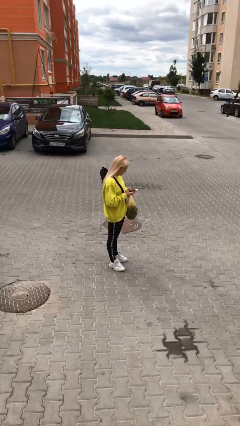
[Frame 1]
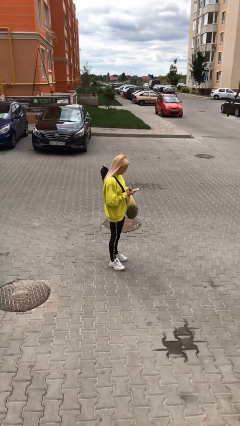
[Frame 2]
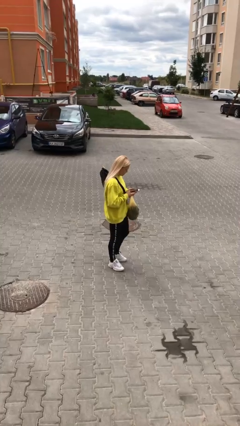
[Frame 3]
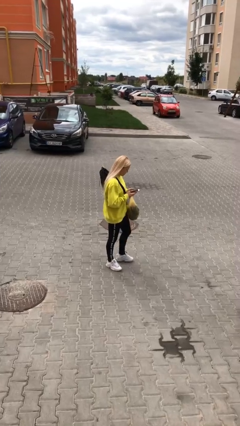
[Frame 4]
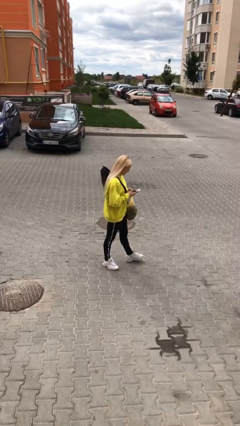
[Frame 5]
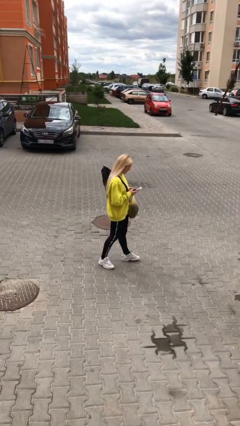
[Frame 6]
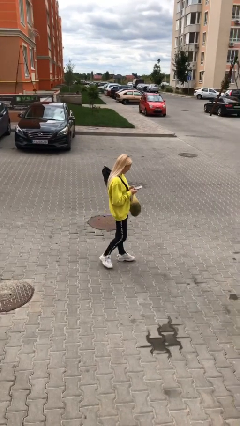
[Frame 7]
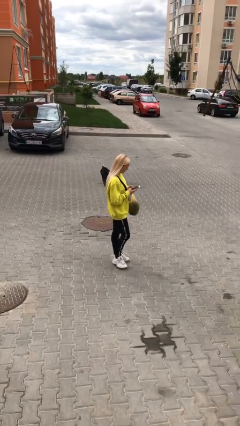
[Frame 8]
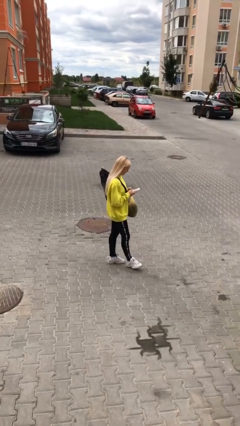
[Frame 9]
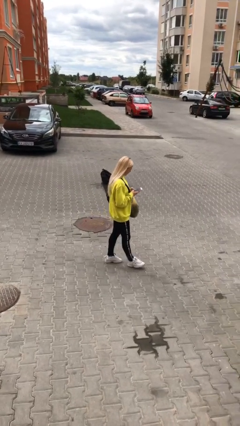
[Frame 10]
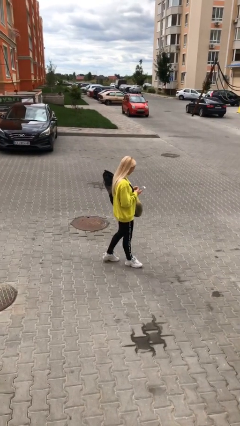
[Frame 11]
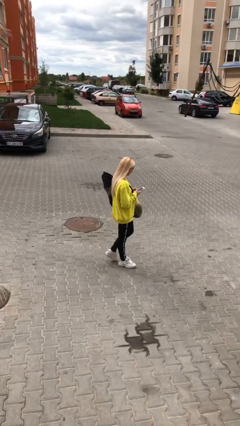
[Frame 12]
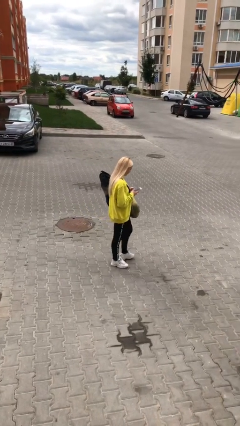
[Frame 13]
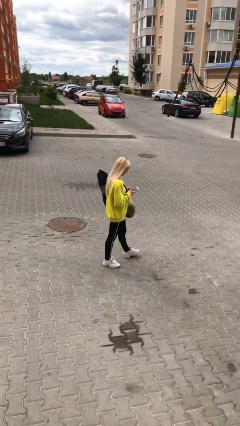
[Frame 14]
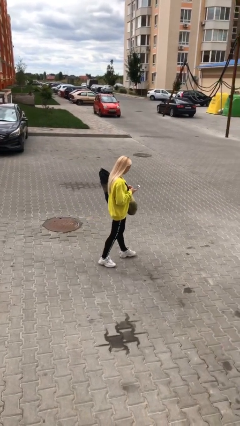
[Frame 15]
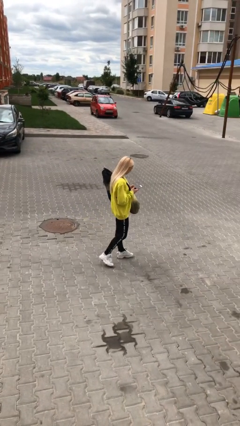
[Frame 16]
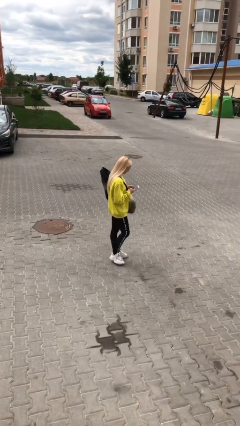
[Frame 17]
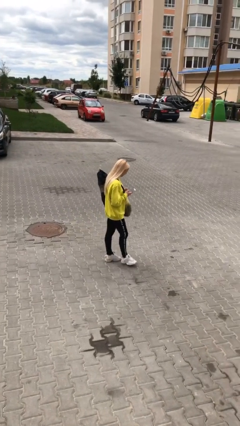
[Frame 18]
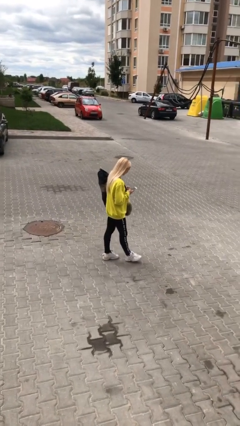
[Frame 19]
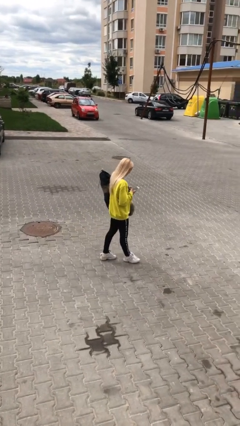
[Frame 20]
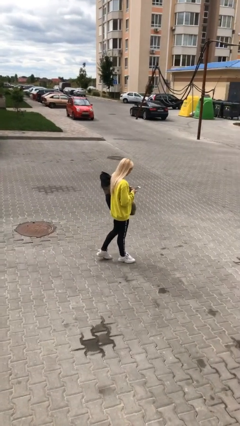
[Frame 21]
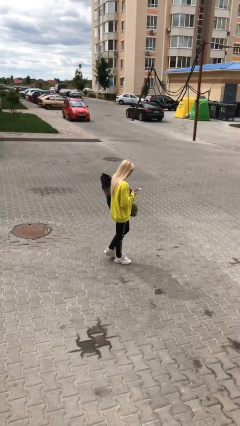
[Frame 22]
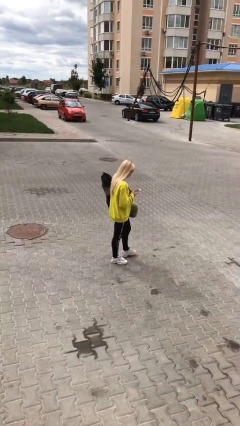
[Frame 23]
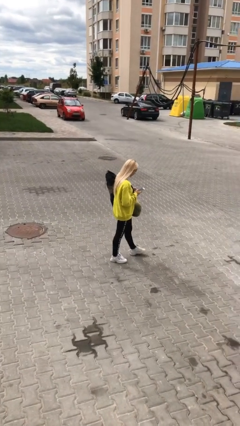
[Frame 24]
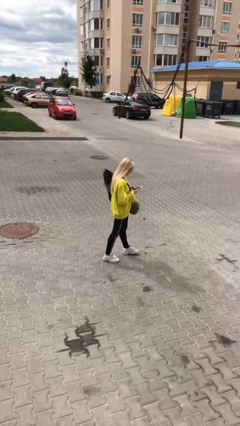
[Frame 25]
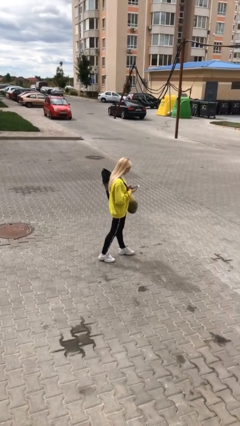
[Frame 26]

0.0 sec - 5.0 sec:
person texts on phone

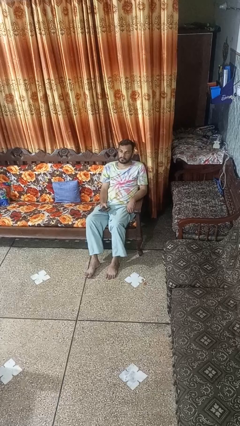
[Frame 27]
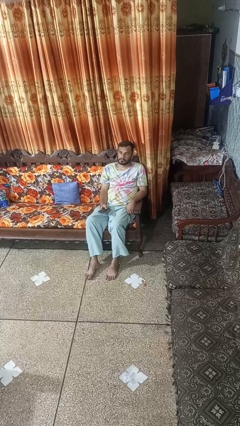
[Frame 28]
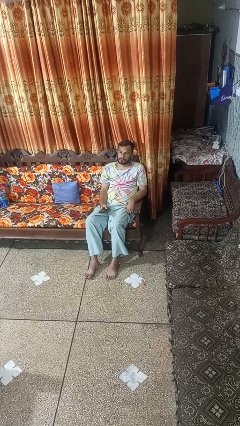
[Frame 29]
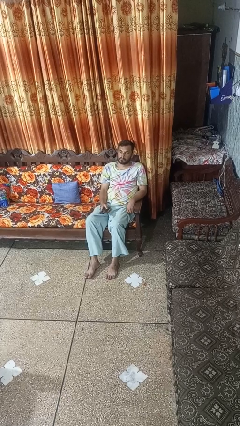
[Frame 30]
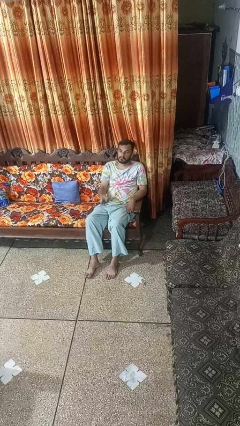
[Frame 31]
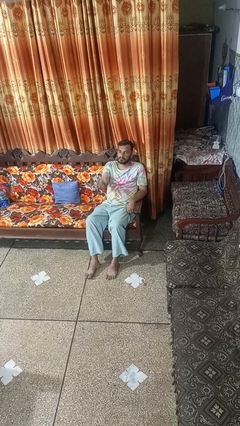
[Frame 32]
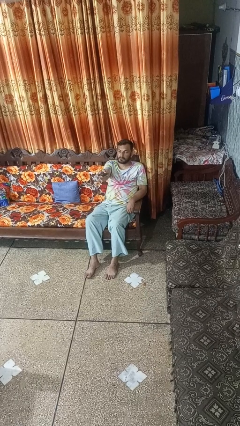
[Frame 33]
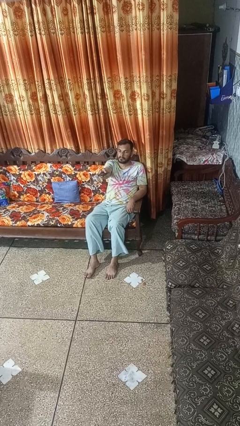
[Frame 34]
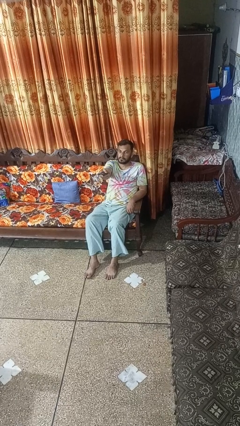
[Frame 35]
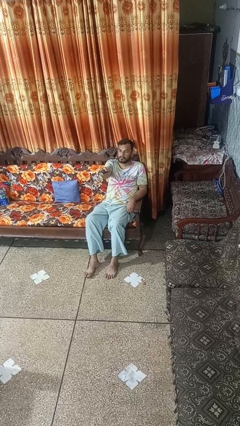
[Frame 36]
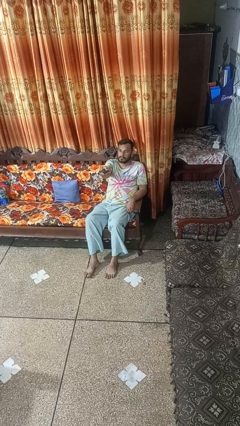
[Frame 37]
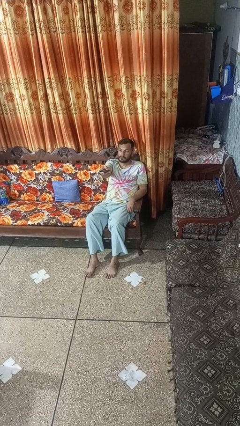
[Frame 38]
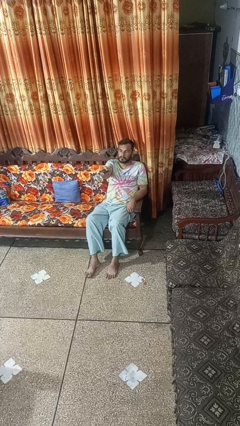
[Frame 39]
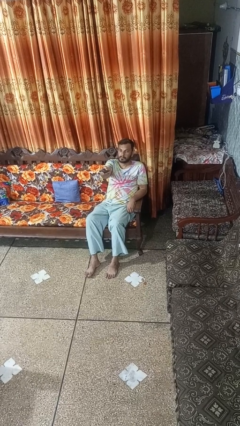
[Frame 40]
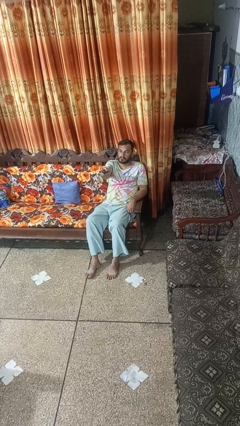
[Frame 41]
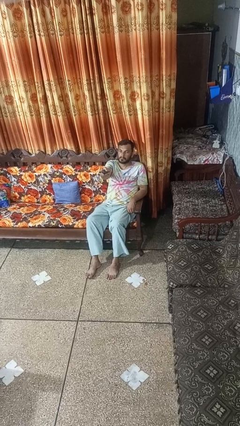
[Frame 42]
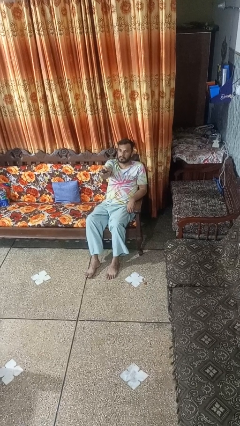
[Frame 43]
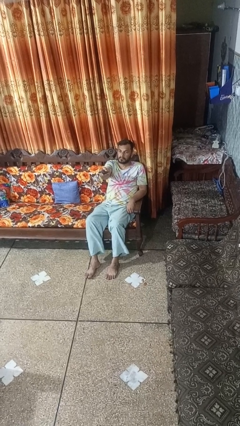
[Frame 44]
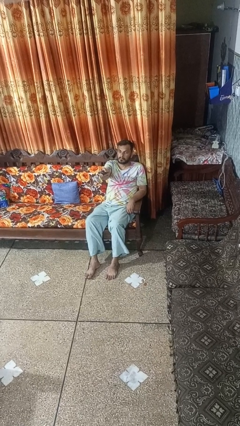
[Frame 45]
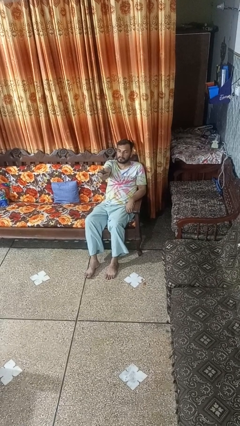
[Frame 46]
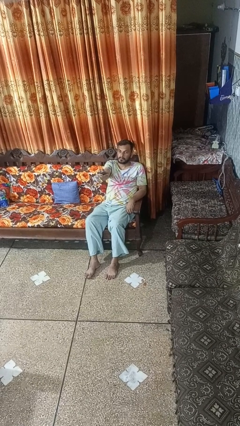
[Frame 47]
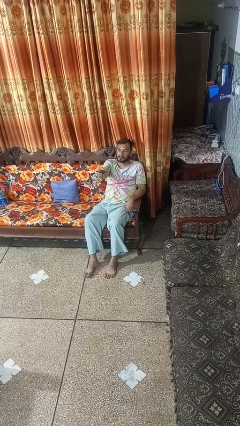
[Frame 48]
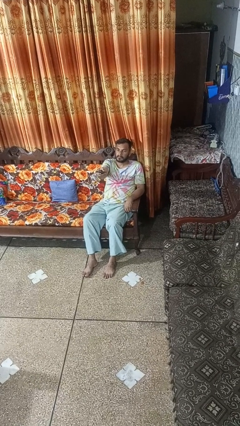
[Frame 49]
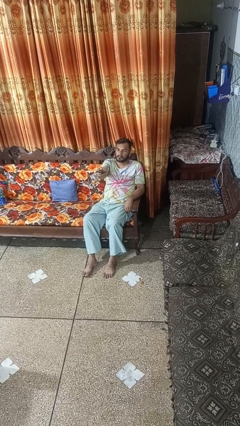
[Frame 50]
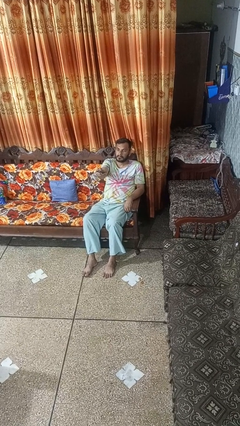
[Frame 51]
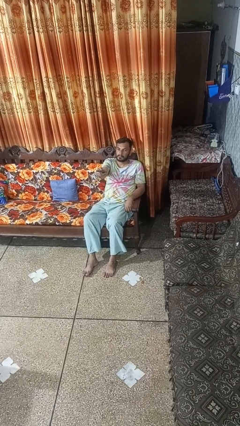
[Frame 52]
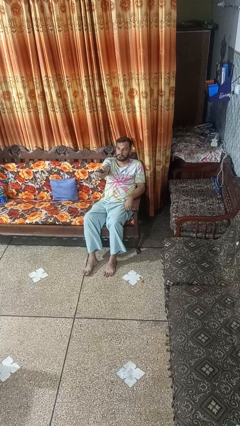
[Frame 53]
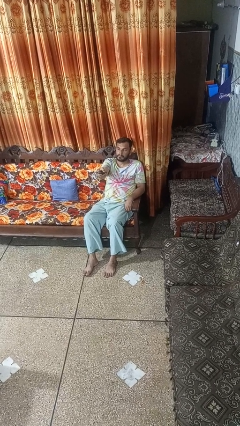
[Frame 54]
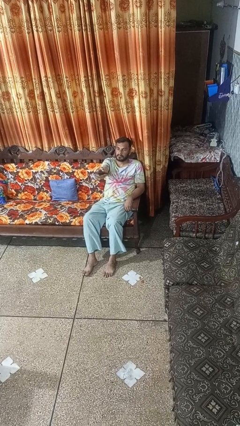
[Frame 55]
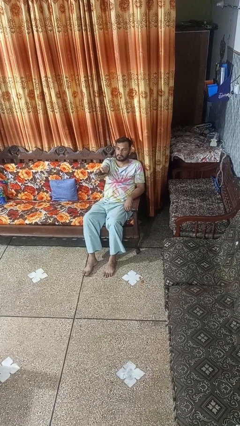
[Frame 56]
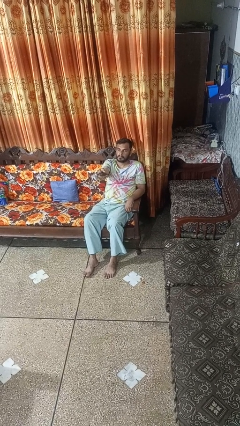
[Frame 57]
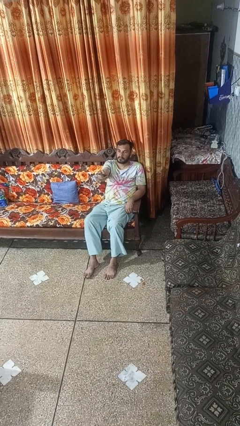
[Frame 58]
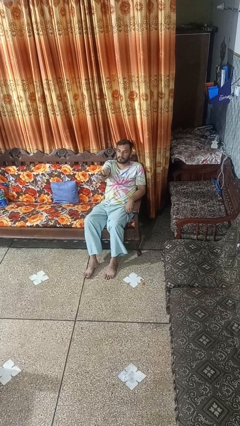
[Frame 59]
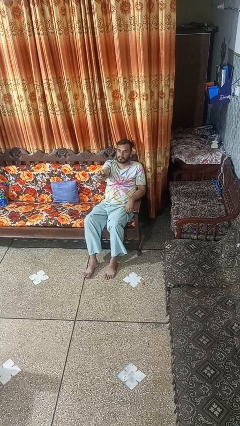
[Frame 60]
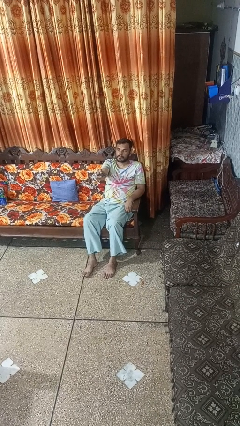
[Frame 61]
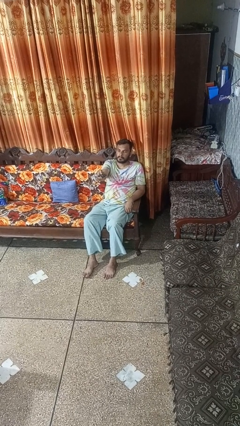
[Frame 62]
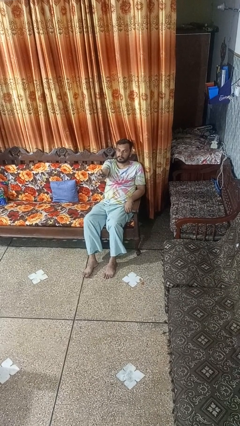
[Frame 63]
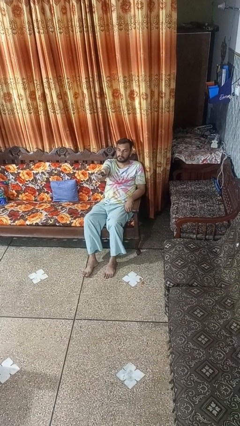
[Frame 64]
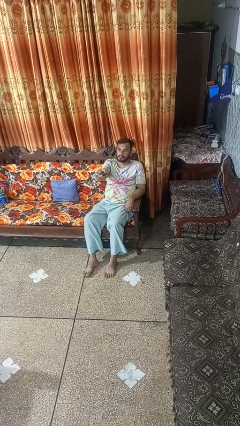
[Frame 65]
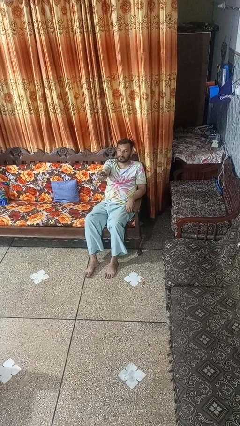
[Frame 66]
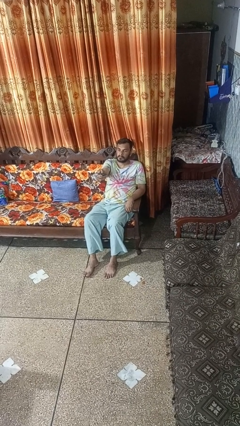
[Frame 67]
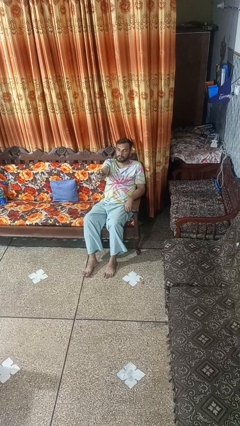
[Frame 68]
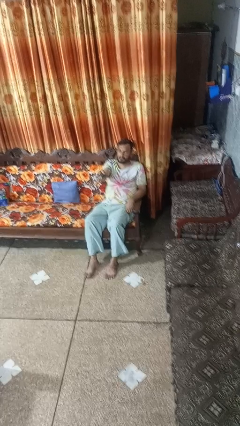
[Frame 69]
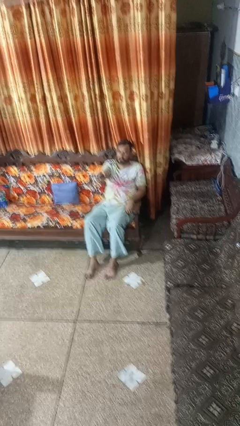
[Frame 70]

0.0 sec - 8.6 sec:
person uses television remote

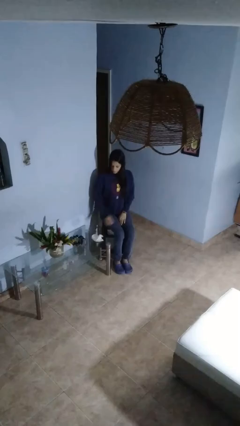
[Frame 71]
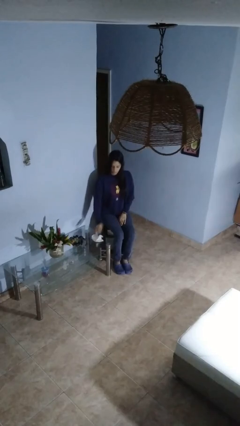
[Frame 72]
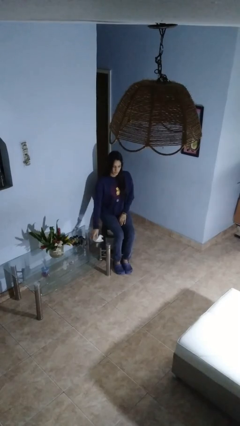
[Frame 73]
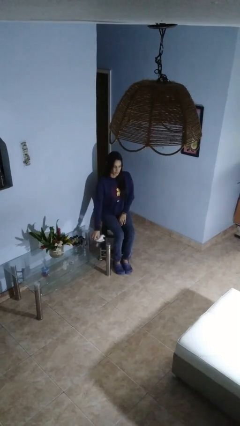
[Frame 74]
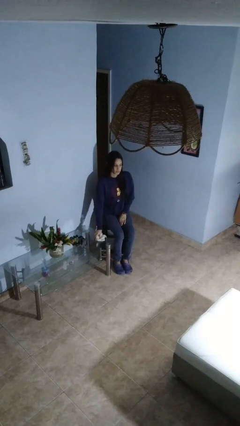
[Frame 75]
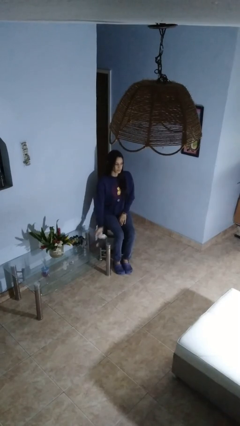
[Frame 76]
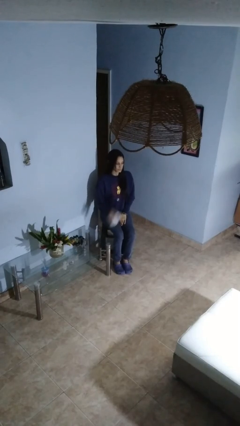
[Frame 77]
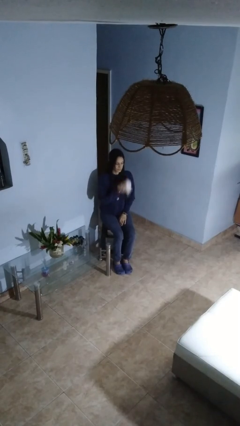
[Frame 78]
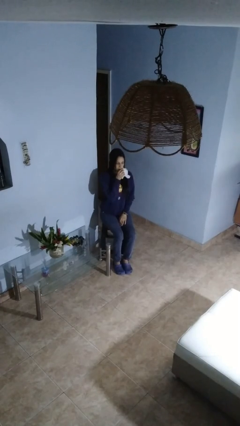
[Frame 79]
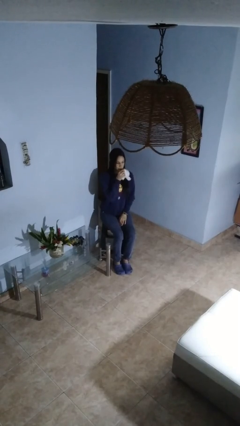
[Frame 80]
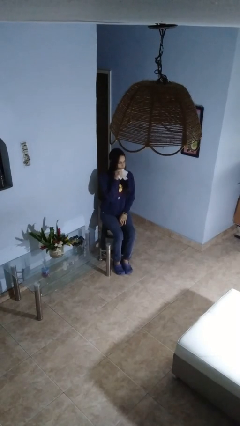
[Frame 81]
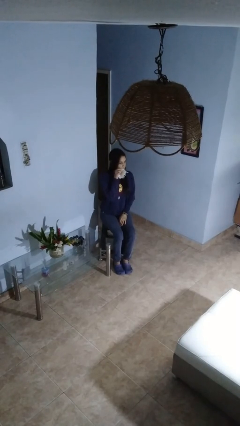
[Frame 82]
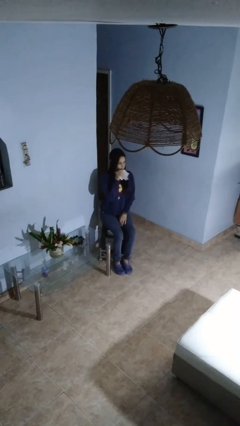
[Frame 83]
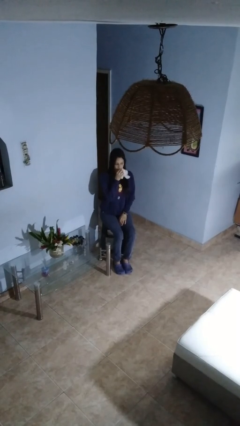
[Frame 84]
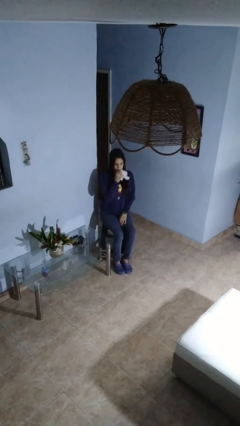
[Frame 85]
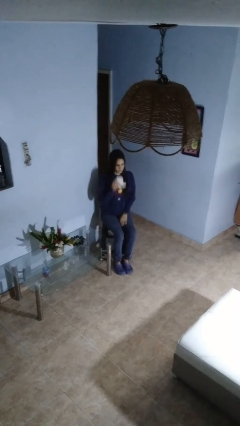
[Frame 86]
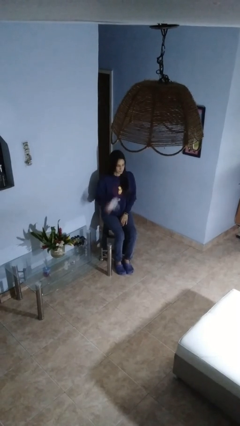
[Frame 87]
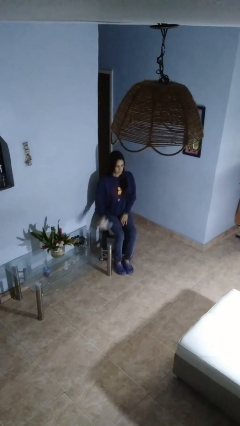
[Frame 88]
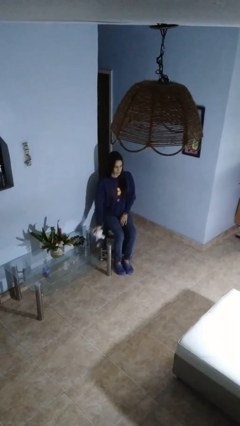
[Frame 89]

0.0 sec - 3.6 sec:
person wipes mouth with napkin

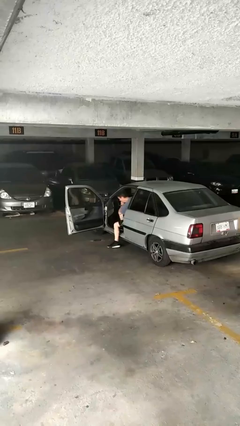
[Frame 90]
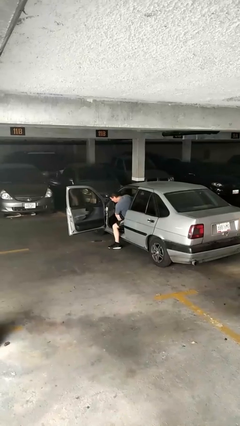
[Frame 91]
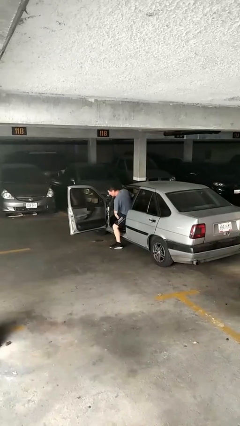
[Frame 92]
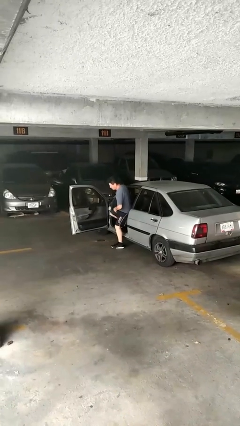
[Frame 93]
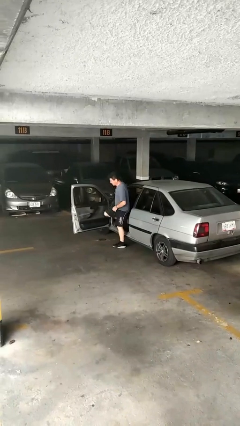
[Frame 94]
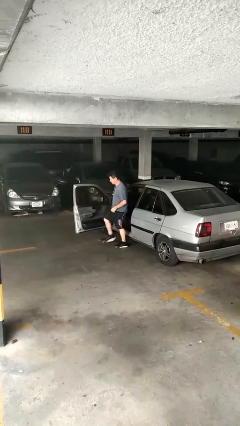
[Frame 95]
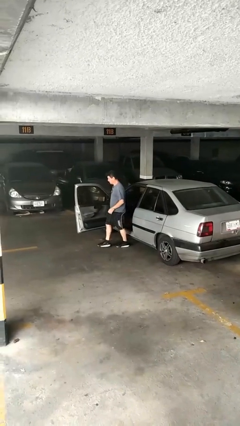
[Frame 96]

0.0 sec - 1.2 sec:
person exits car
